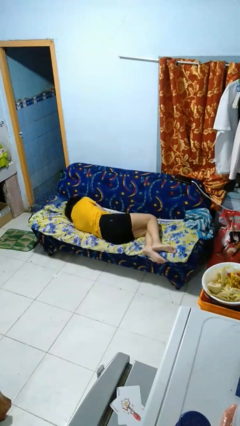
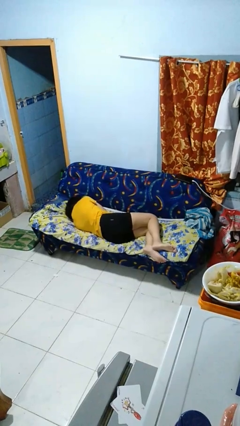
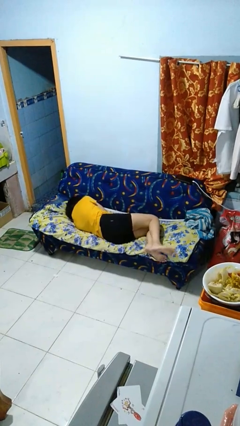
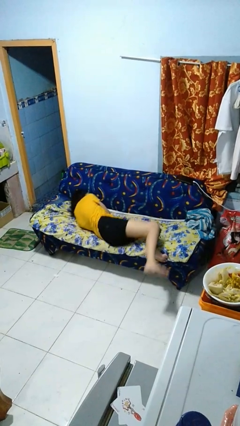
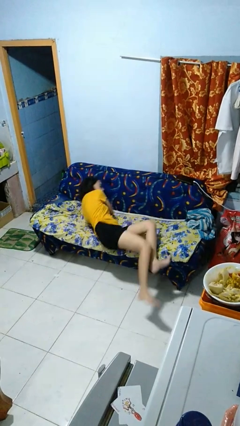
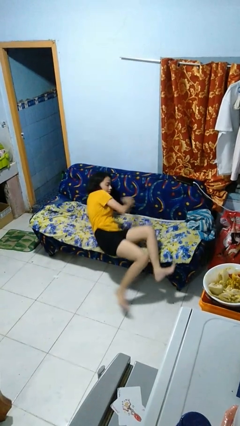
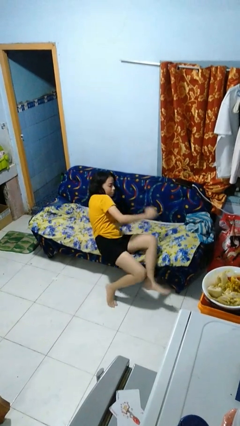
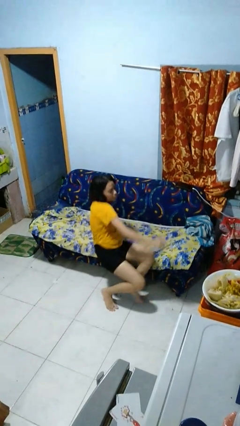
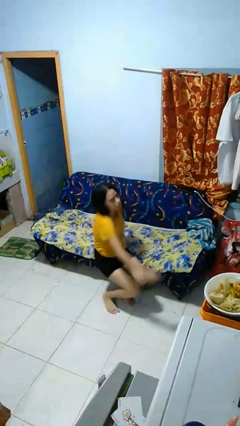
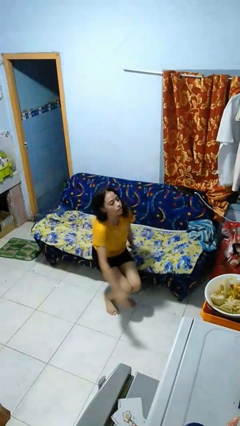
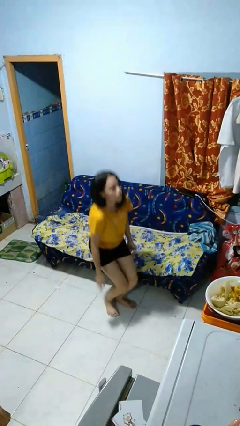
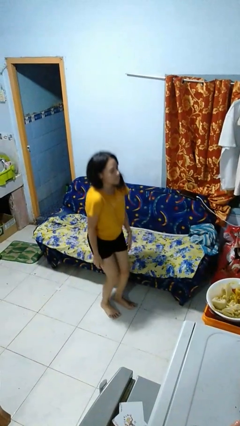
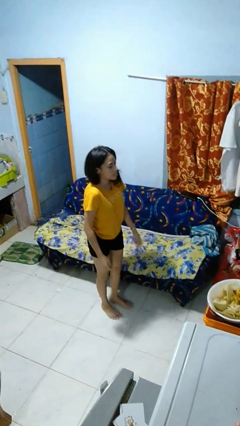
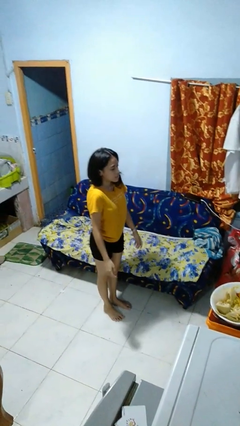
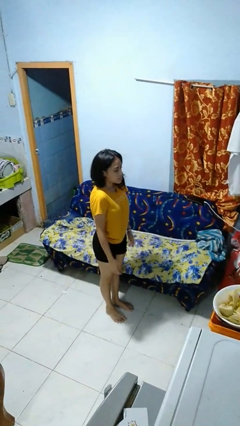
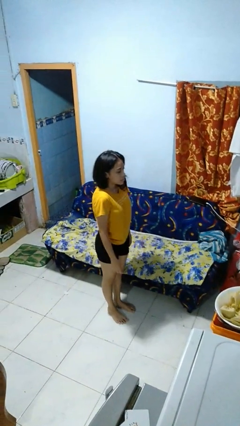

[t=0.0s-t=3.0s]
person stands up

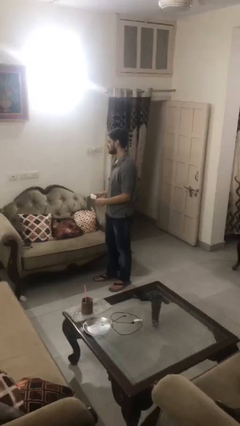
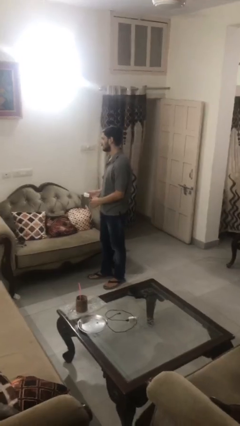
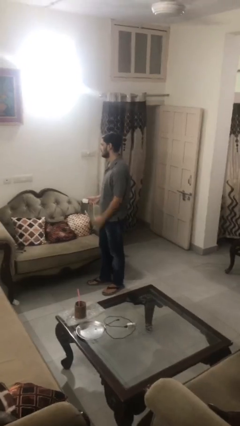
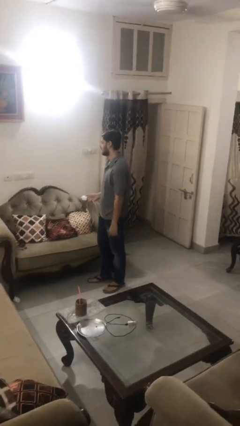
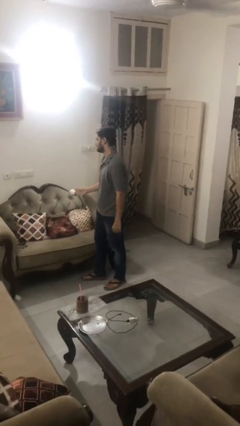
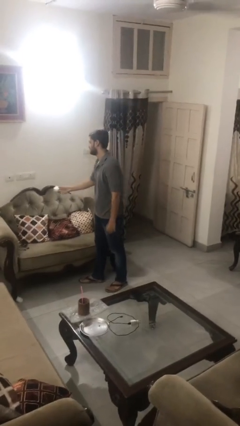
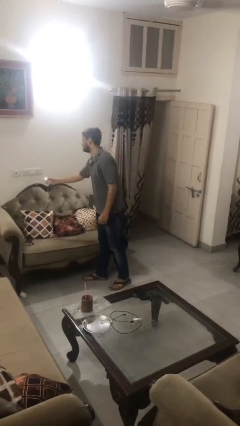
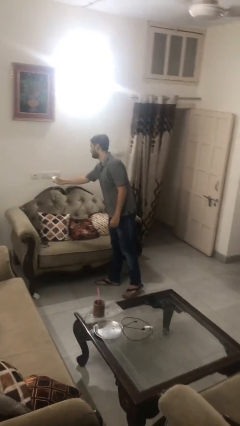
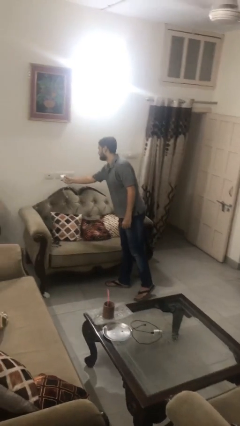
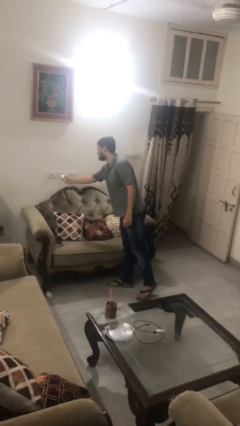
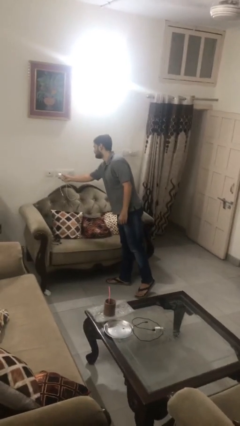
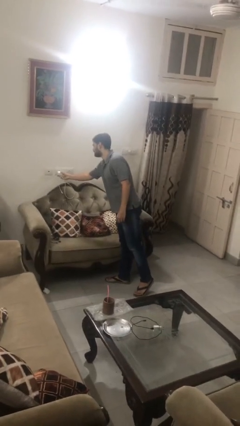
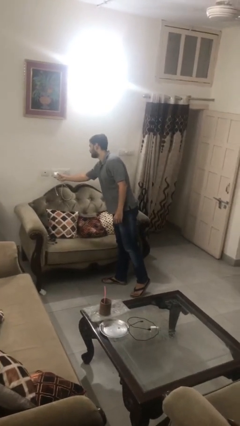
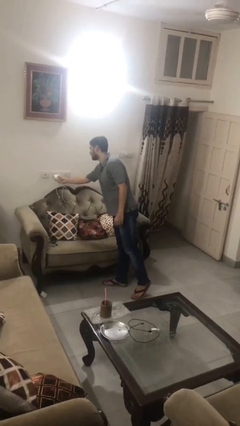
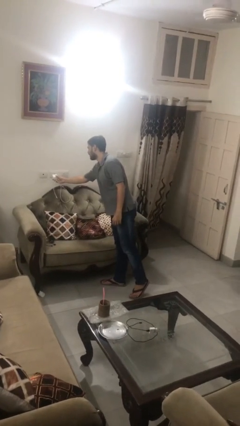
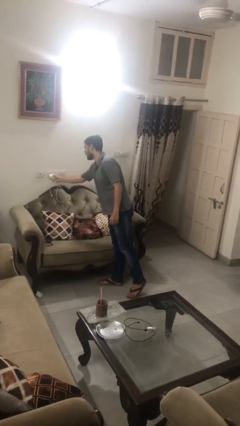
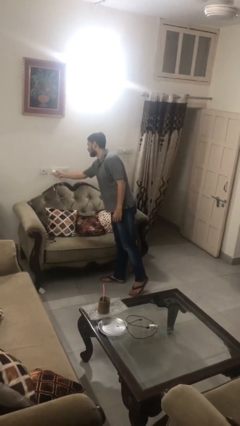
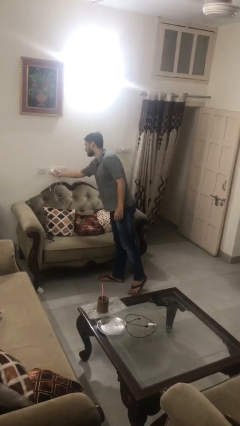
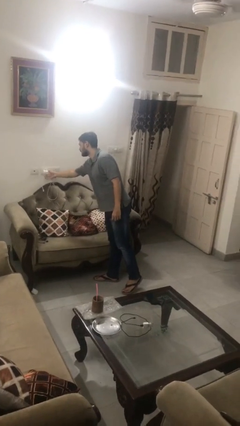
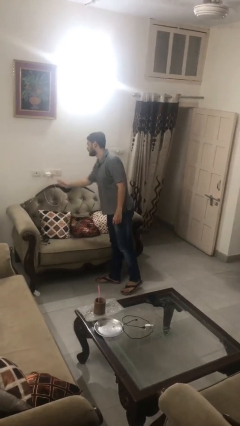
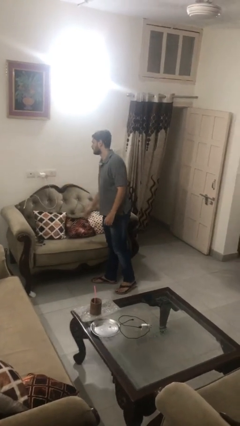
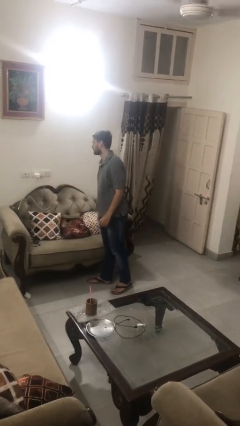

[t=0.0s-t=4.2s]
person plugs into electrical socket

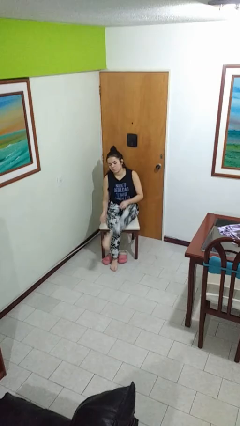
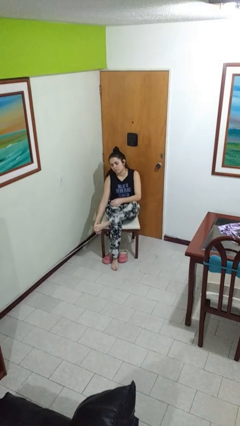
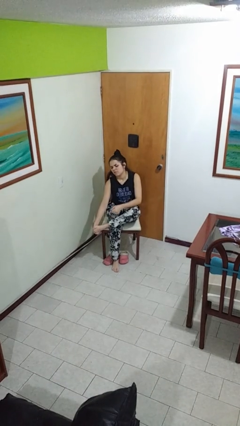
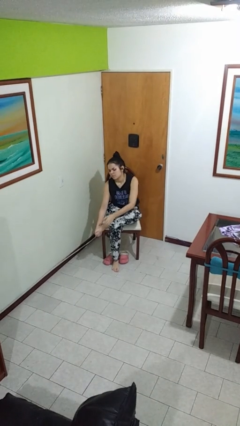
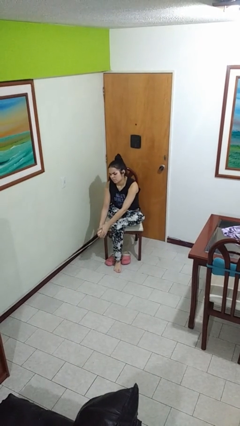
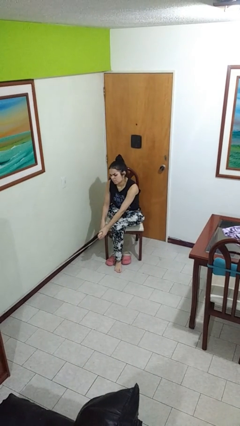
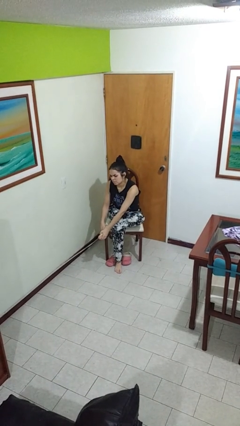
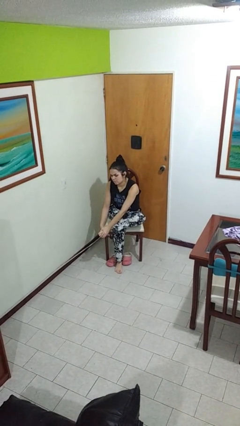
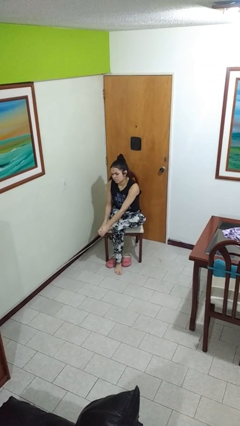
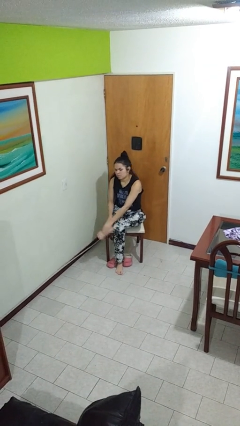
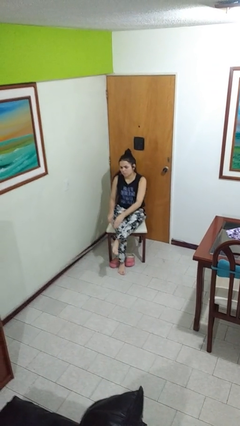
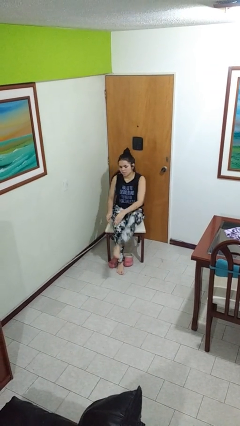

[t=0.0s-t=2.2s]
person rubs foot

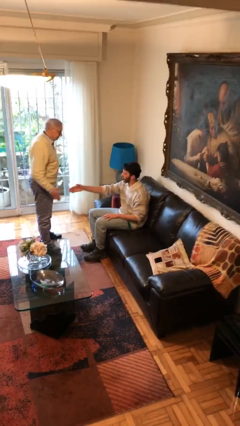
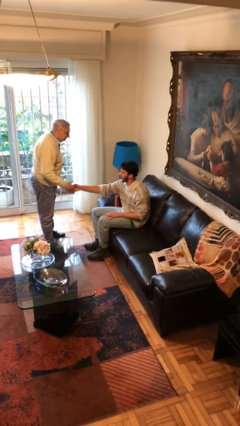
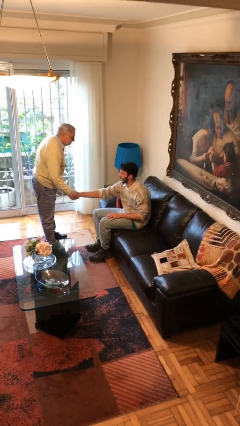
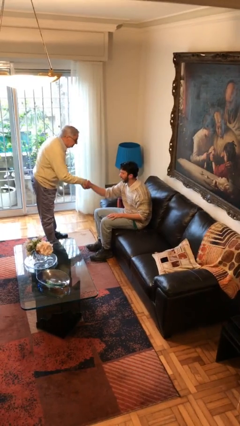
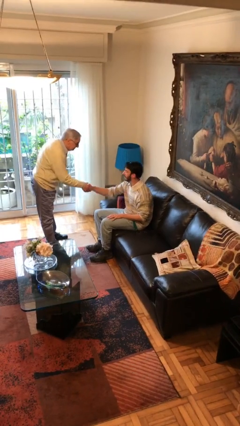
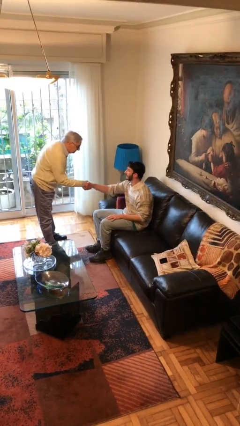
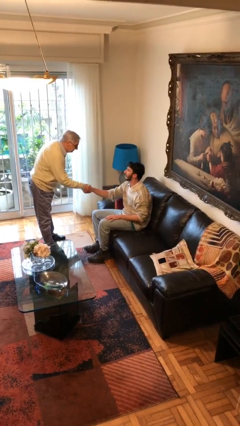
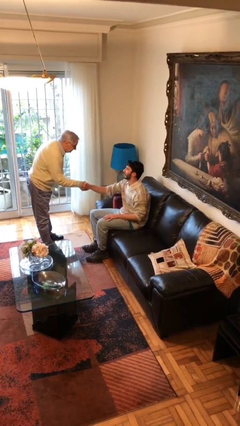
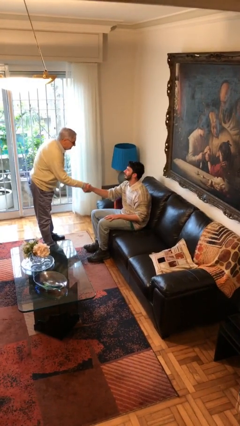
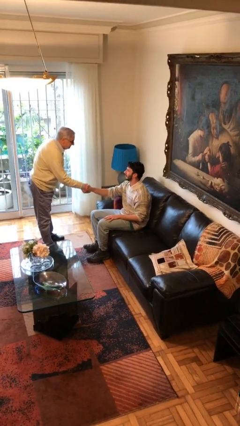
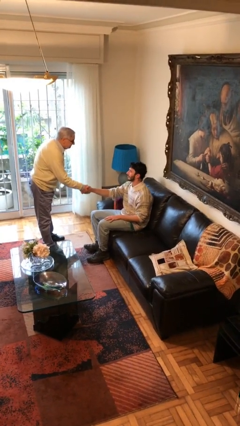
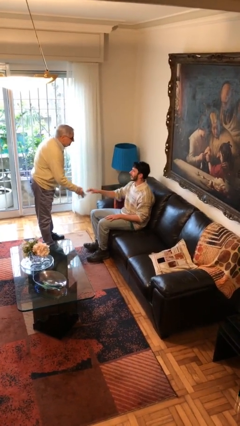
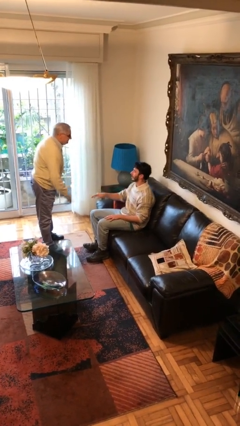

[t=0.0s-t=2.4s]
person shakes hand

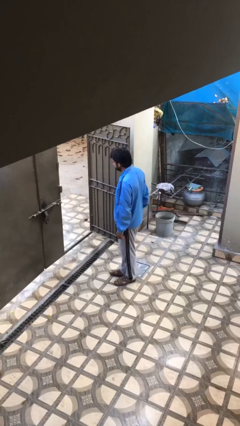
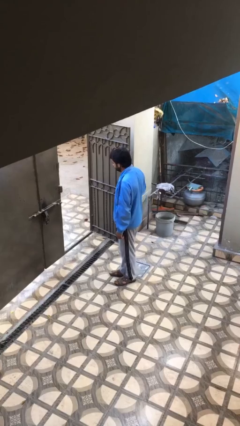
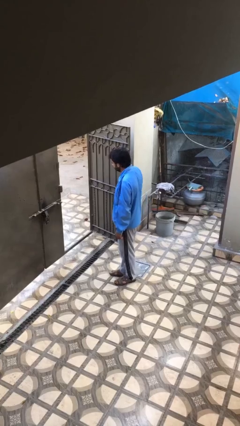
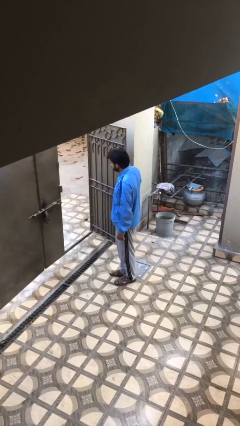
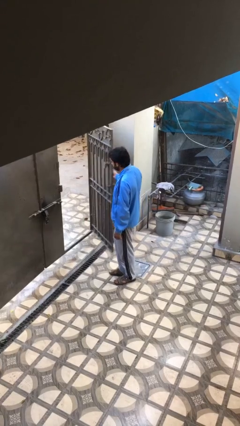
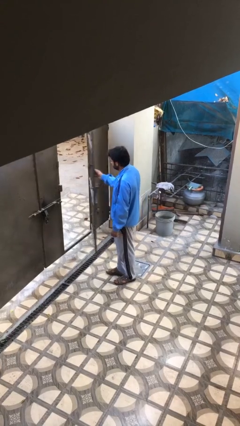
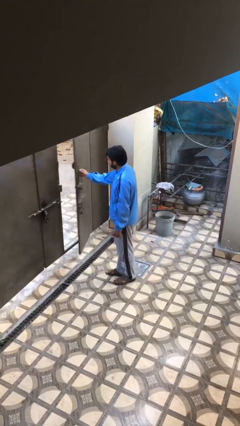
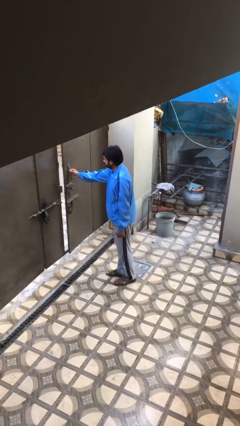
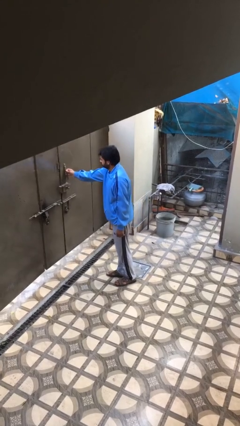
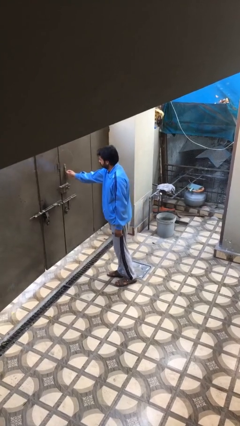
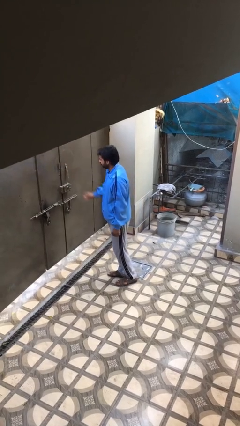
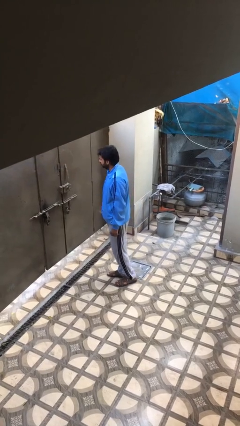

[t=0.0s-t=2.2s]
person closes facility door

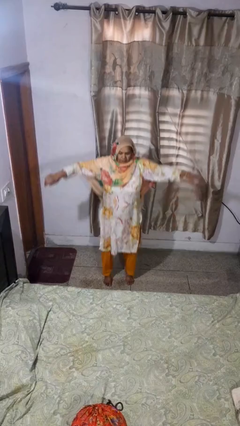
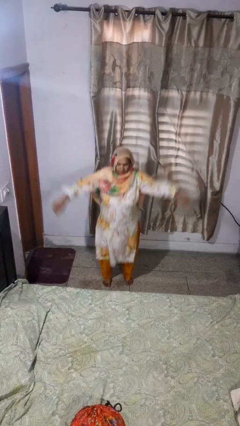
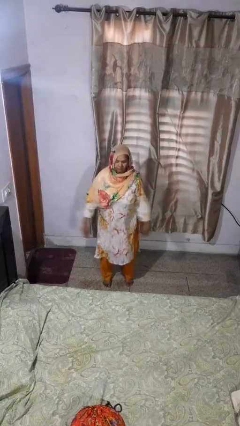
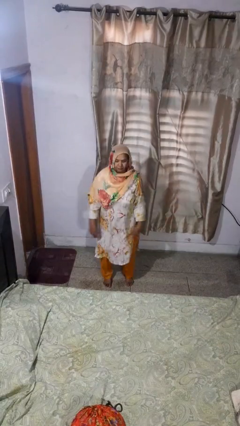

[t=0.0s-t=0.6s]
person jumps

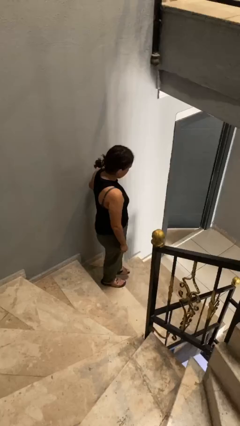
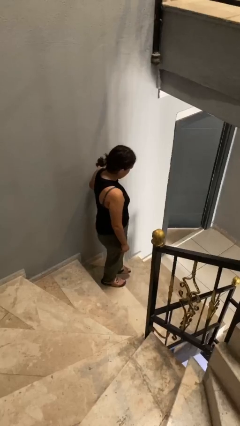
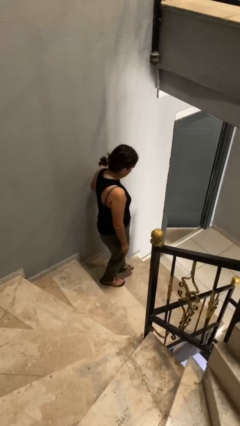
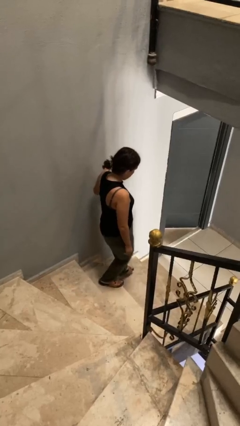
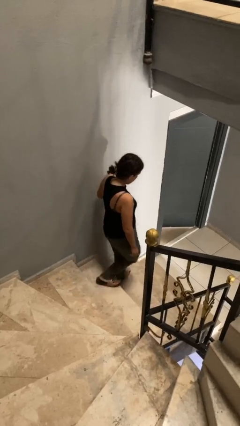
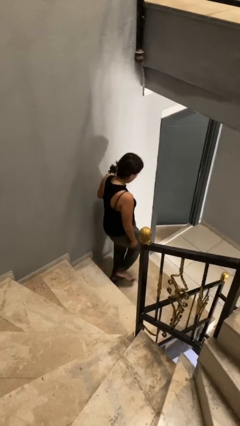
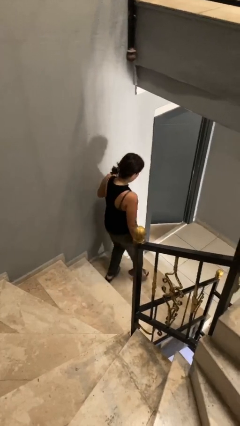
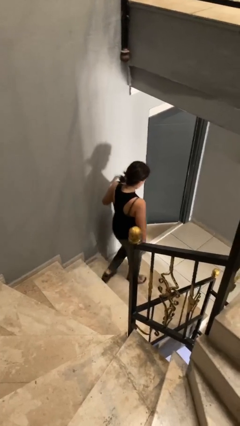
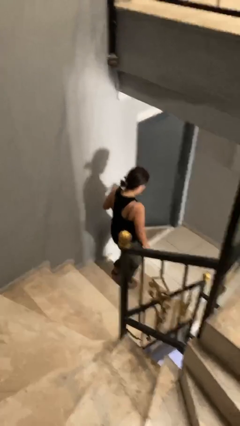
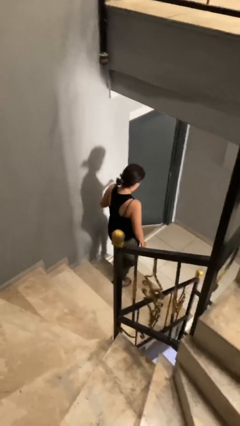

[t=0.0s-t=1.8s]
person climbs down stairs

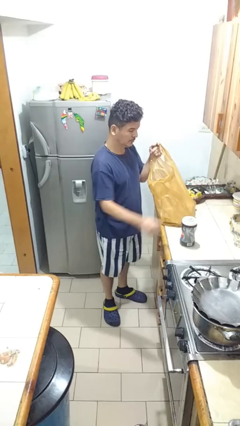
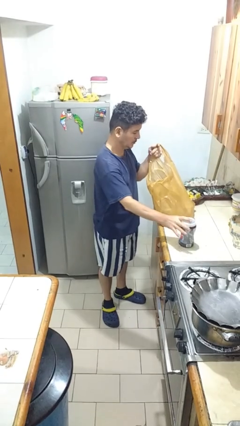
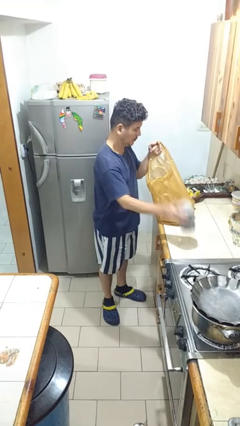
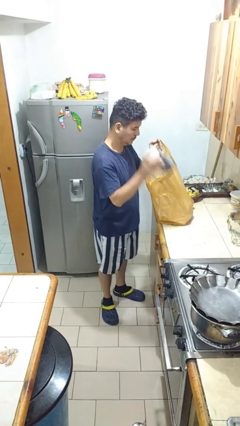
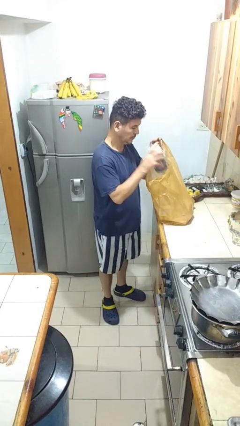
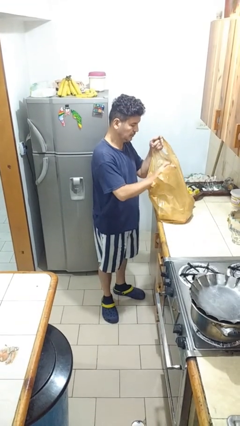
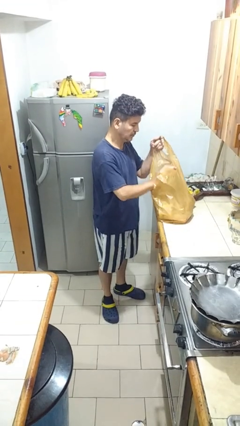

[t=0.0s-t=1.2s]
person puts object into bag
